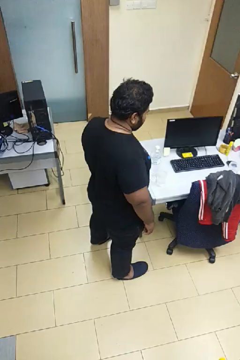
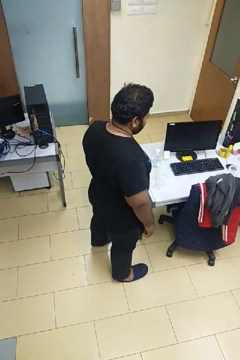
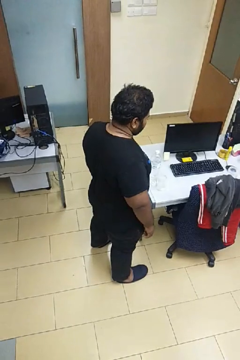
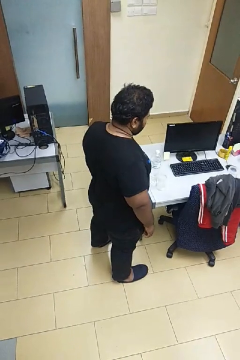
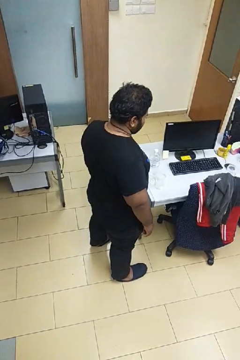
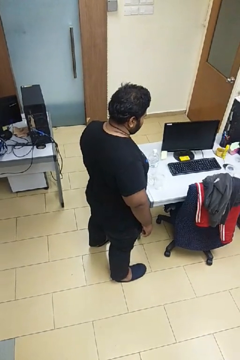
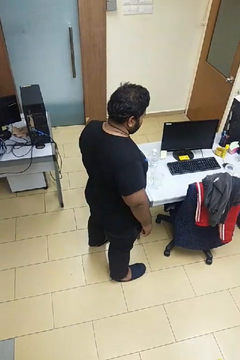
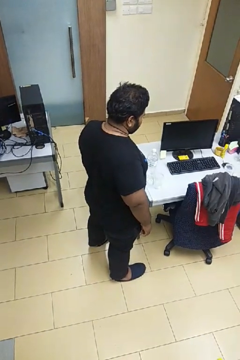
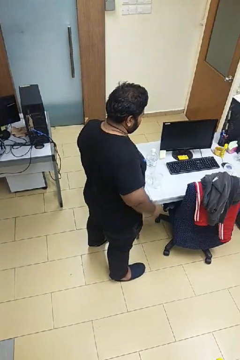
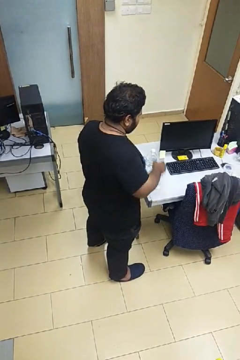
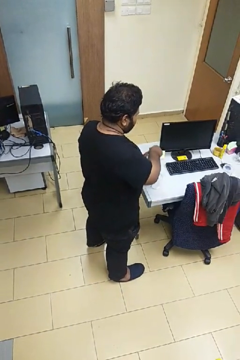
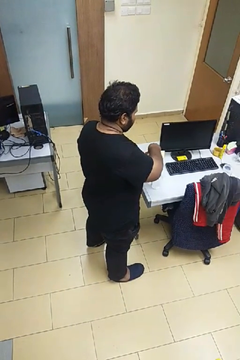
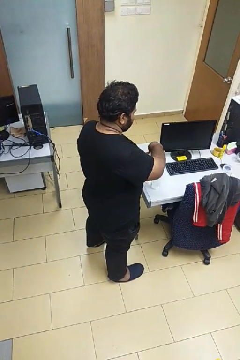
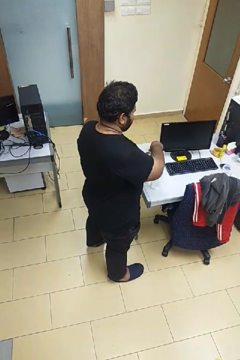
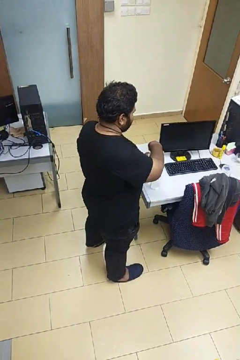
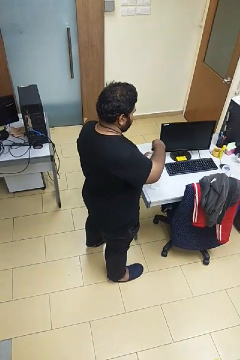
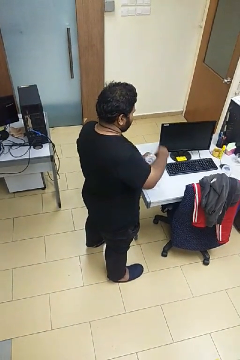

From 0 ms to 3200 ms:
person unscrews lid from bottle

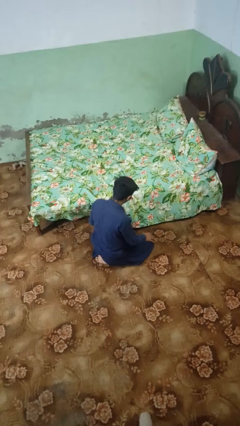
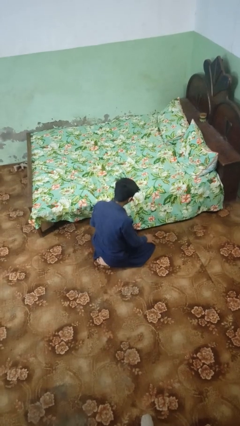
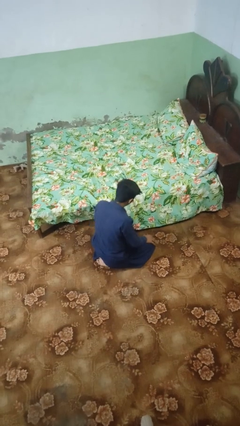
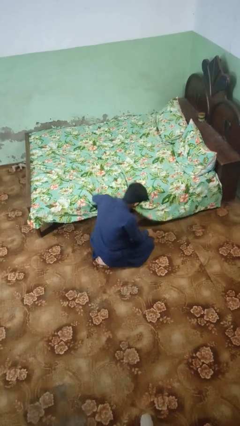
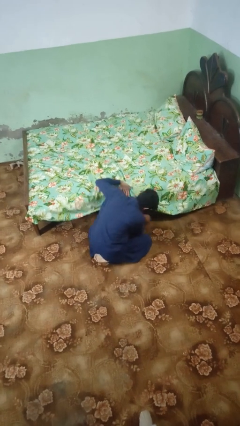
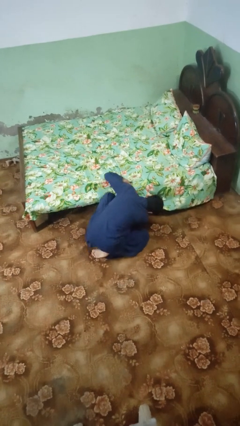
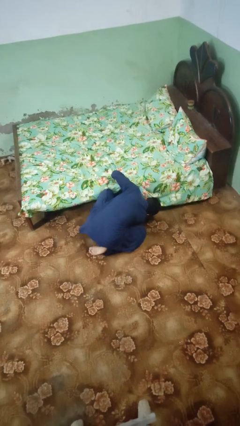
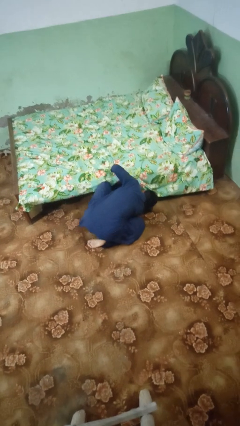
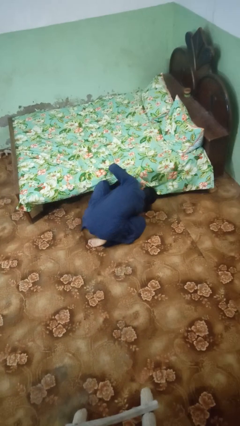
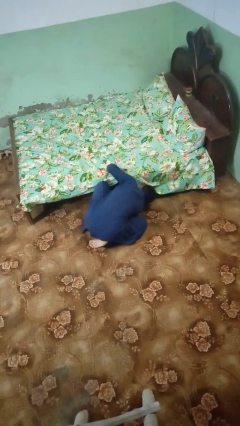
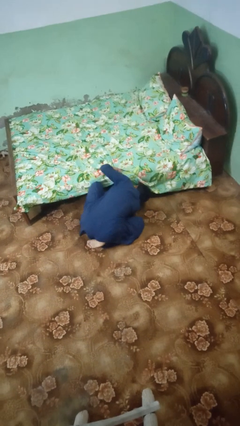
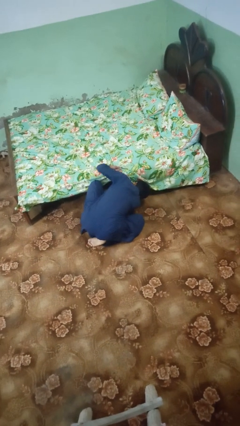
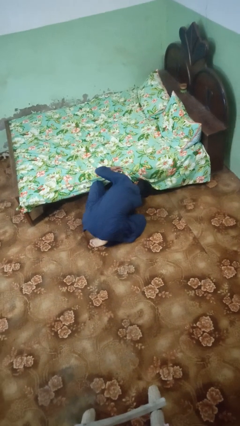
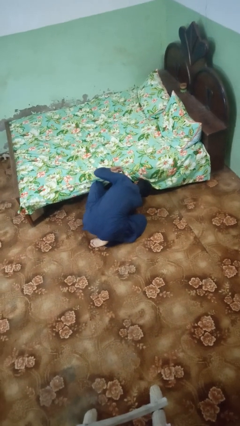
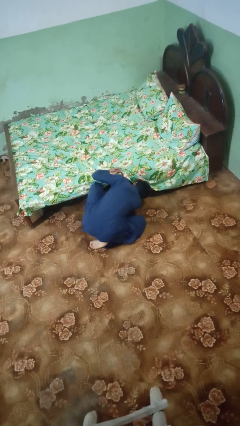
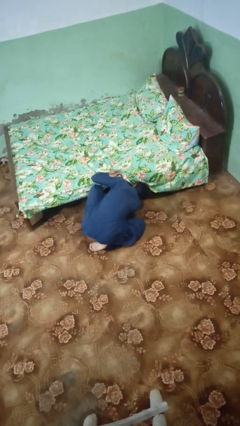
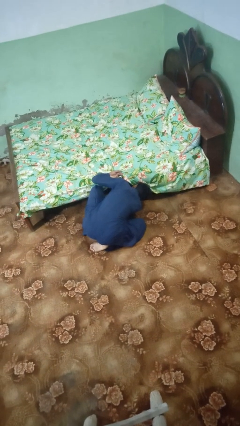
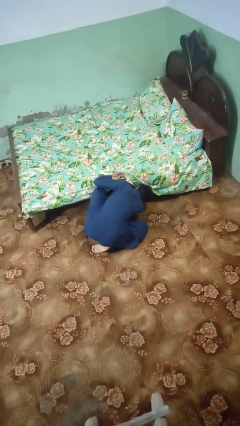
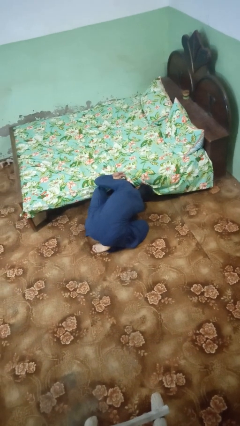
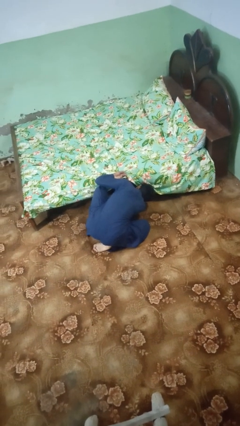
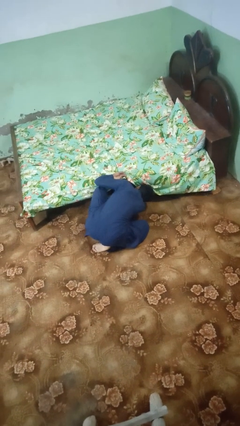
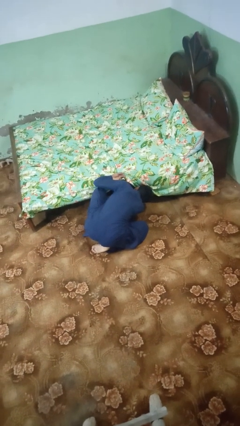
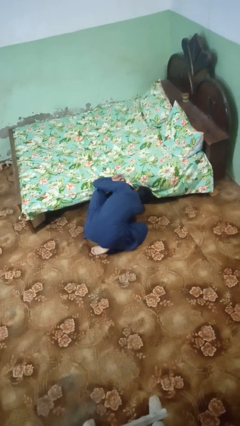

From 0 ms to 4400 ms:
person searches under bed

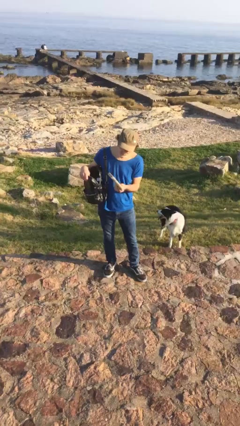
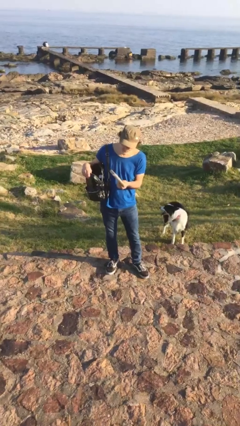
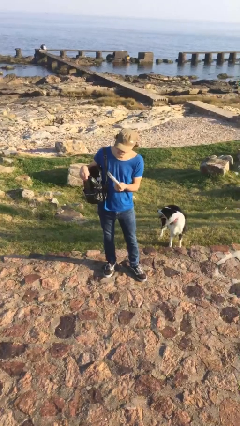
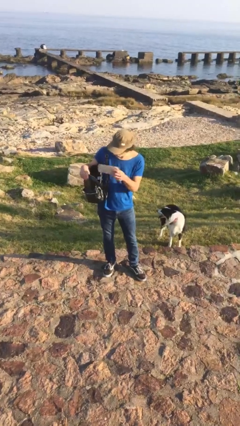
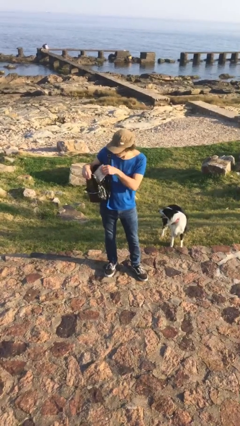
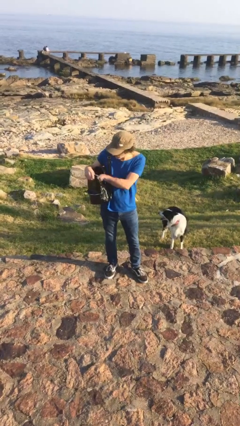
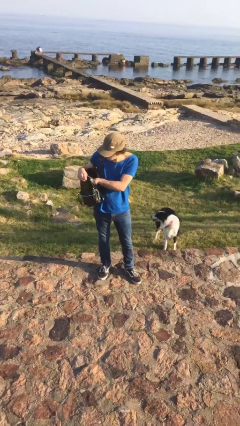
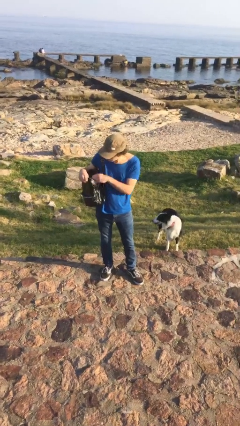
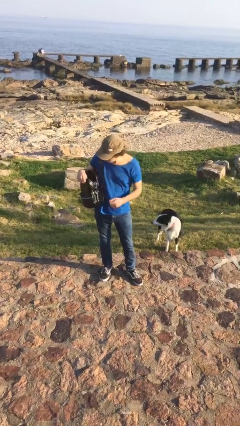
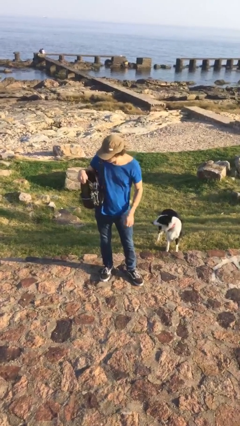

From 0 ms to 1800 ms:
person puts object into purse

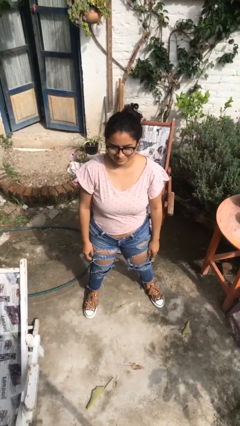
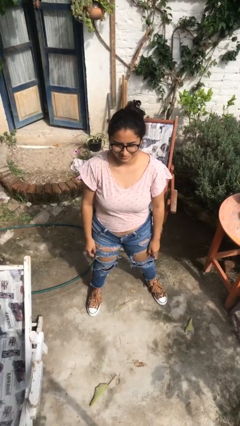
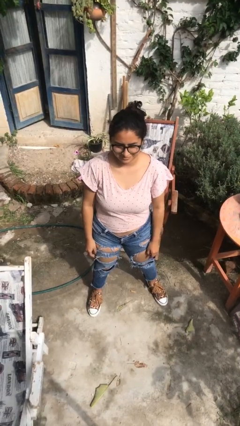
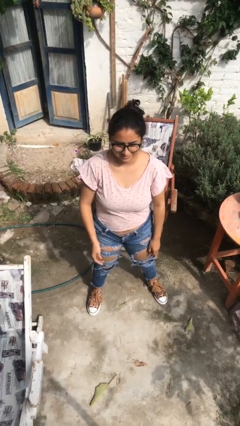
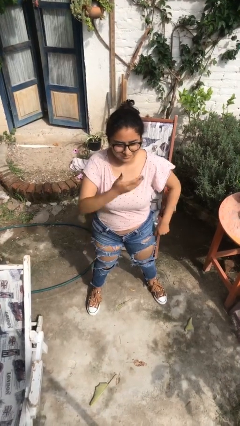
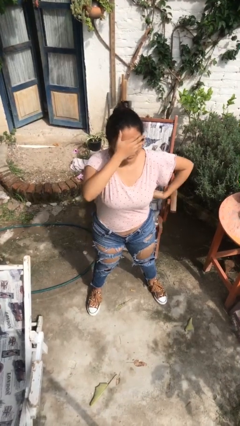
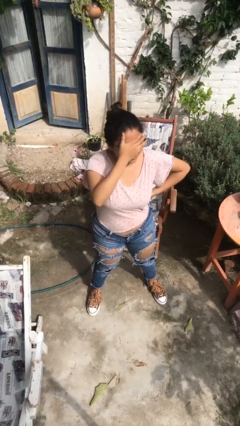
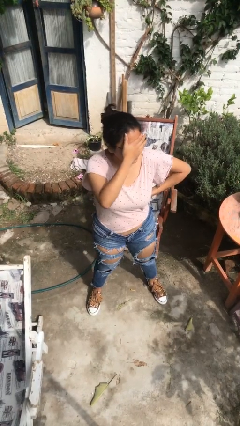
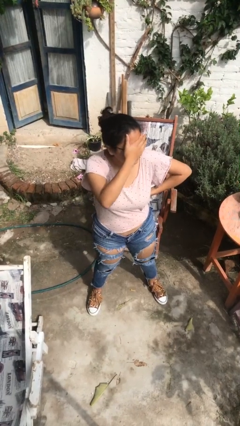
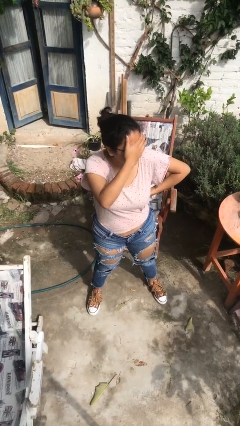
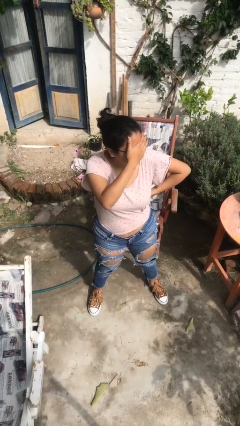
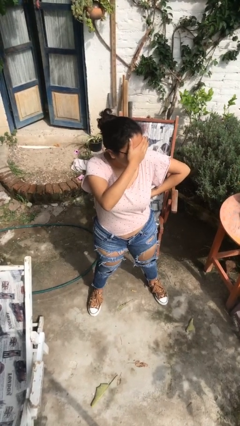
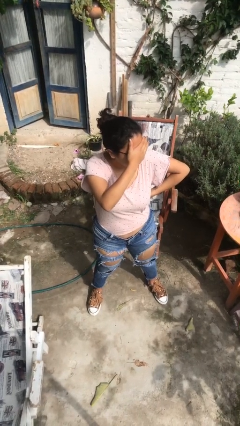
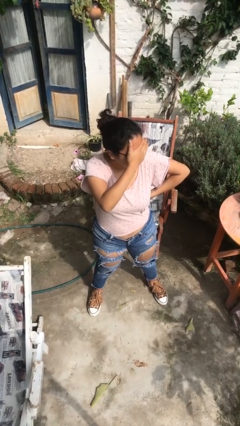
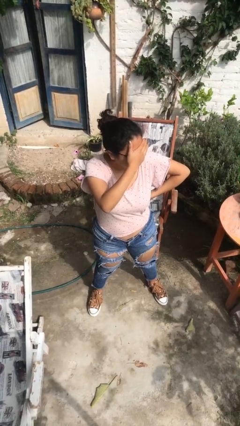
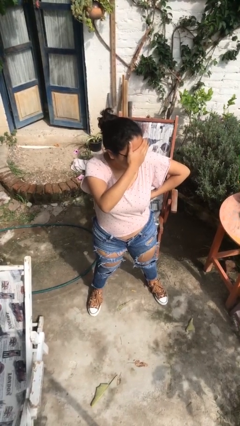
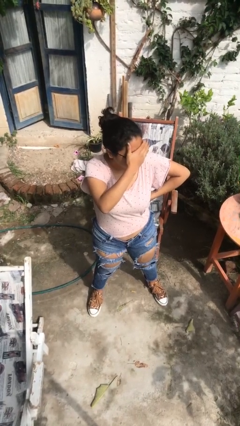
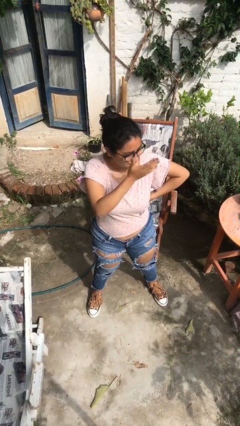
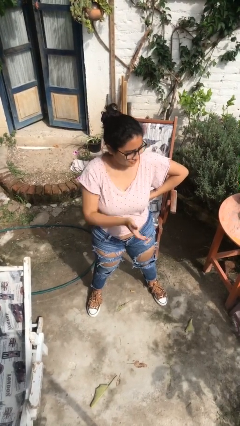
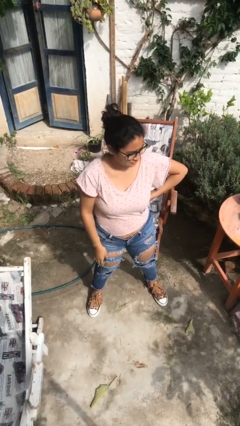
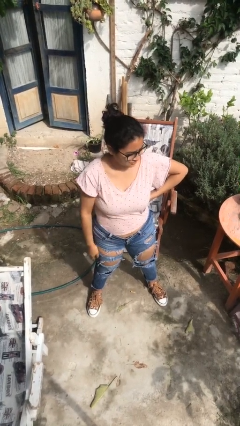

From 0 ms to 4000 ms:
person covers face with hands

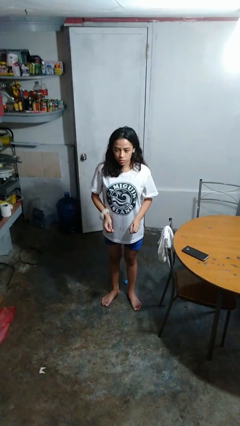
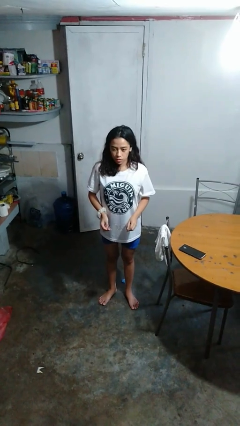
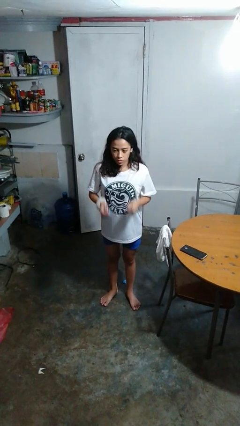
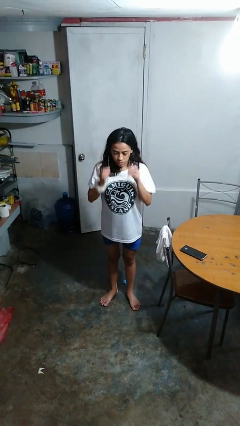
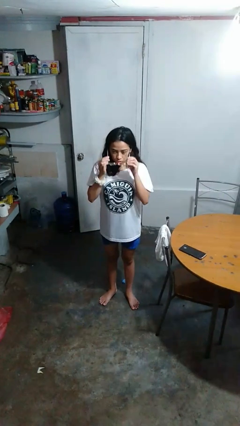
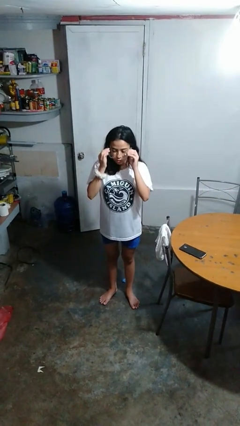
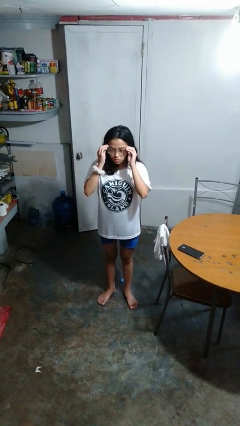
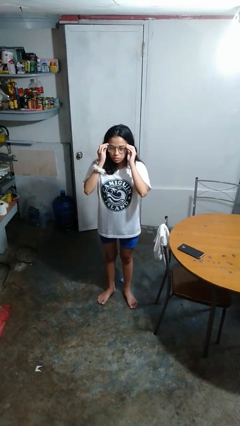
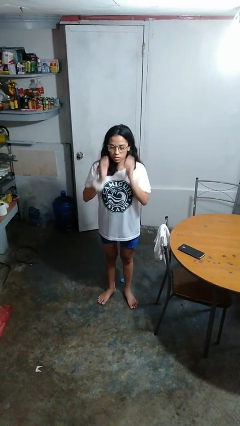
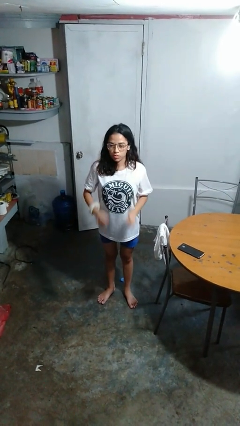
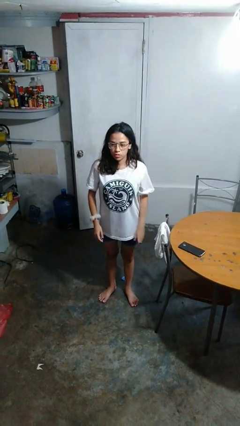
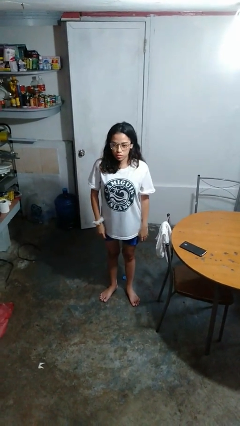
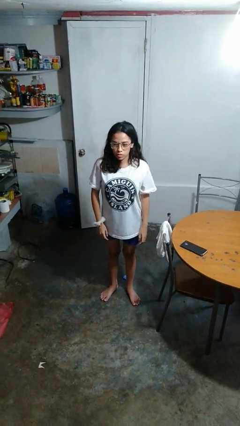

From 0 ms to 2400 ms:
person puts on glasses

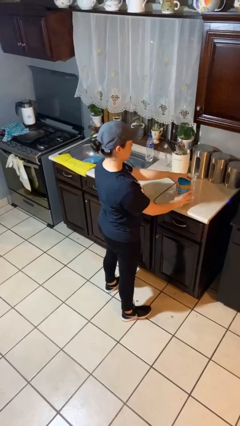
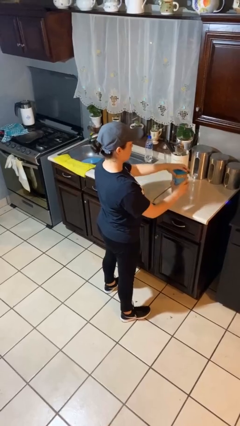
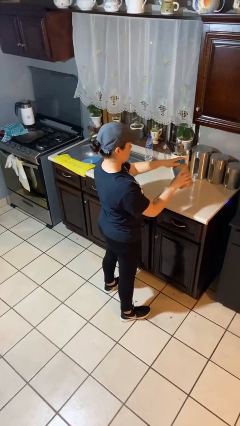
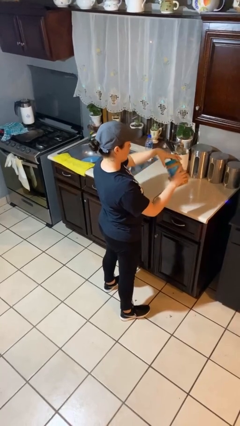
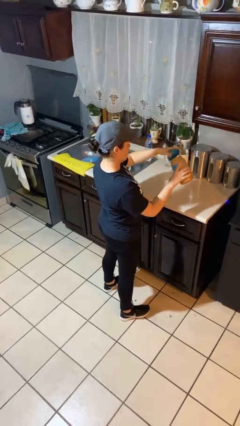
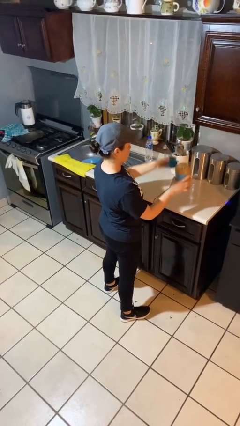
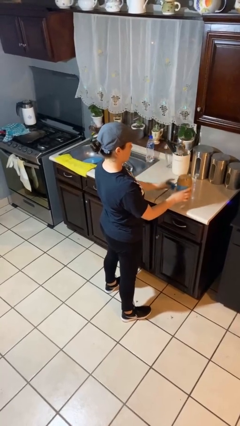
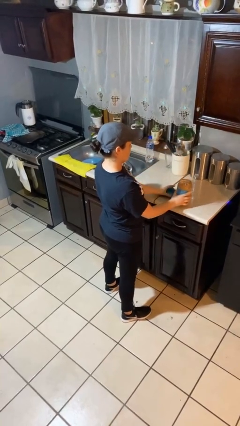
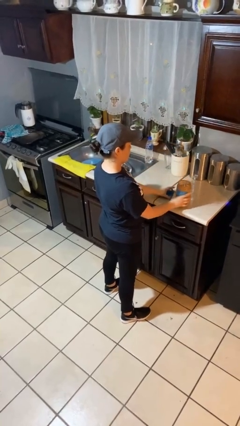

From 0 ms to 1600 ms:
person opens jar

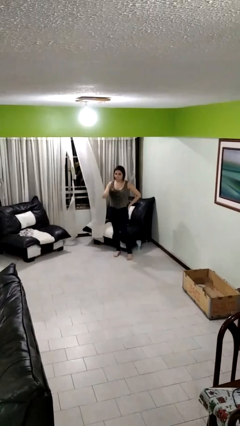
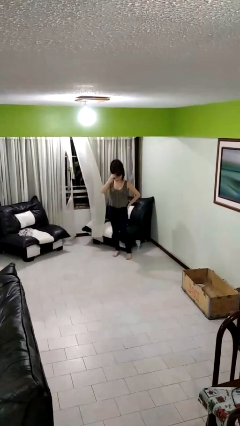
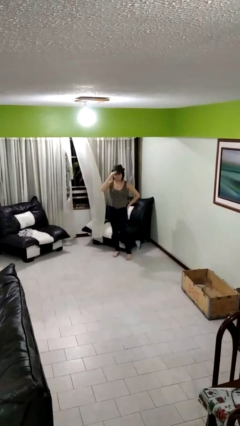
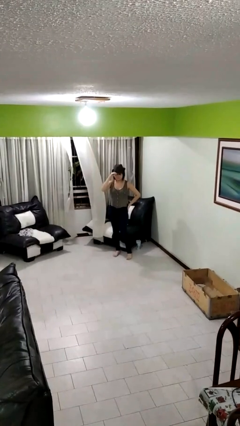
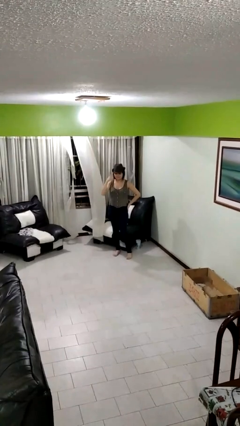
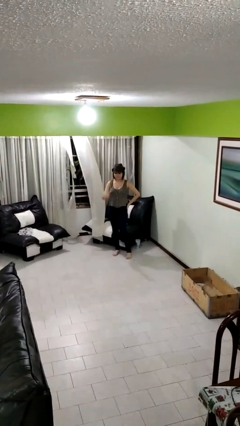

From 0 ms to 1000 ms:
person puts on hat
